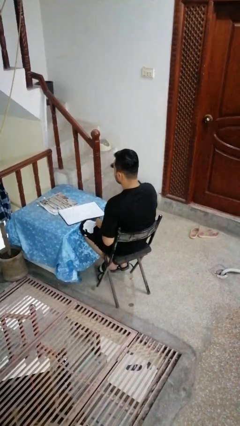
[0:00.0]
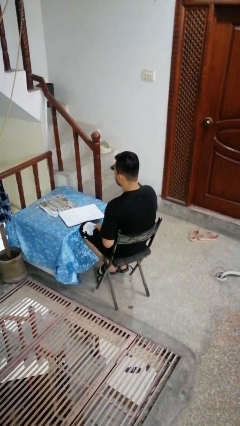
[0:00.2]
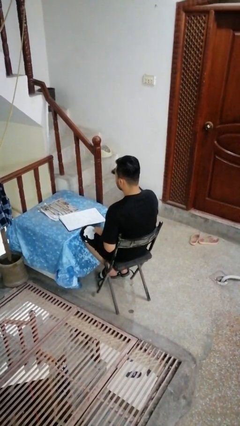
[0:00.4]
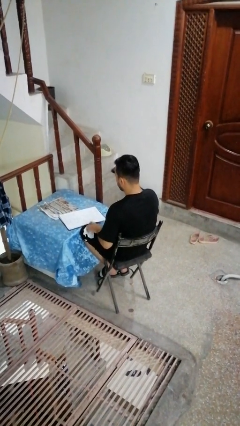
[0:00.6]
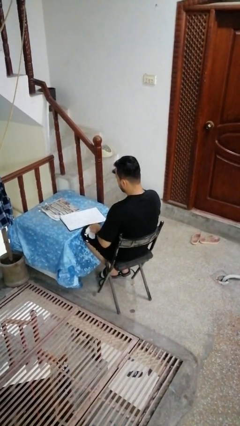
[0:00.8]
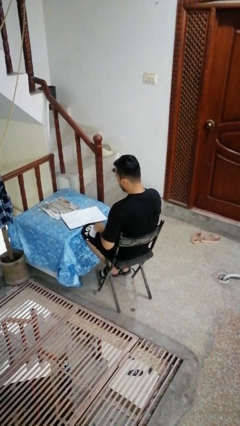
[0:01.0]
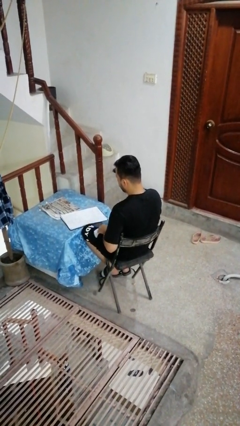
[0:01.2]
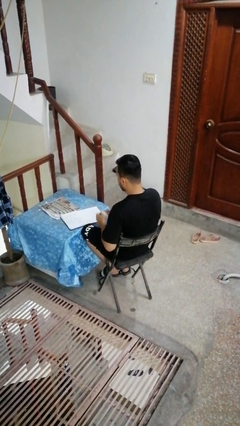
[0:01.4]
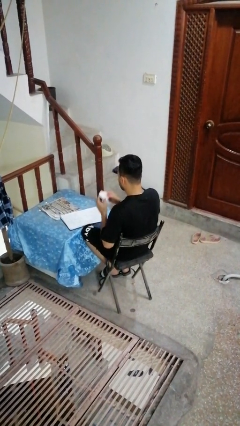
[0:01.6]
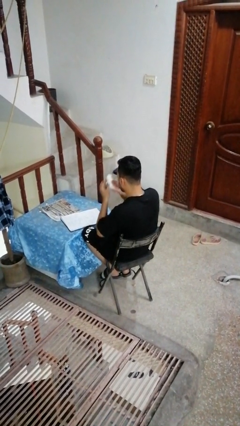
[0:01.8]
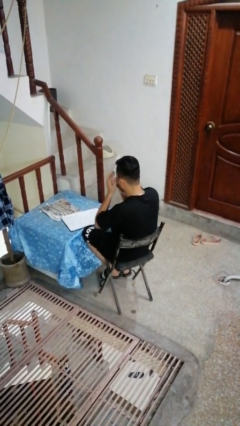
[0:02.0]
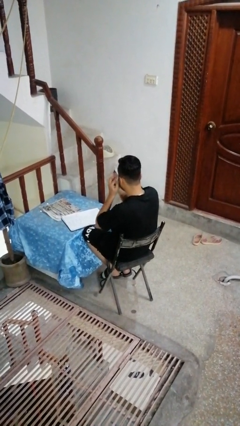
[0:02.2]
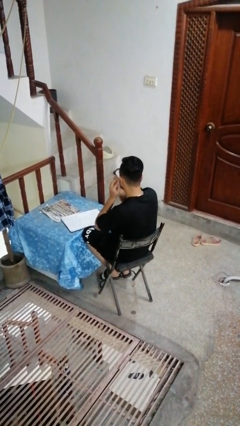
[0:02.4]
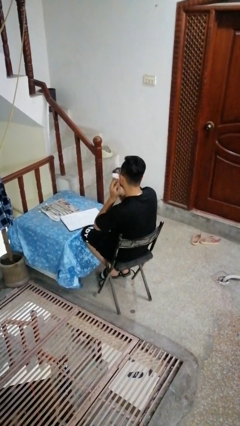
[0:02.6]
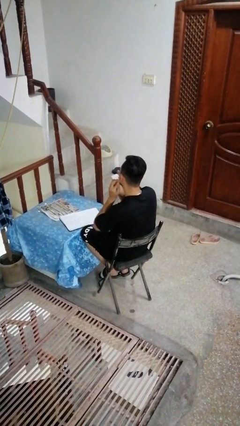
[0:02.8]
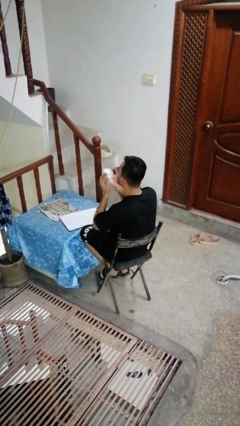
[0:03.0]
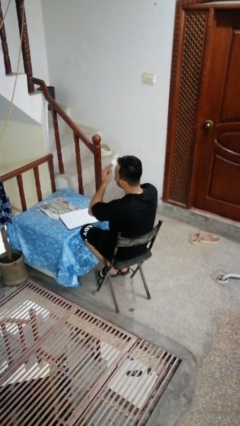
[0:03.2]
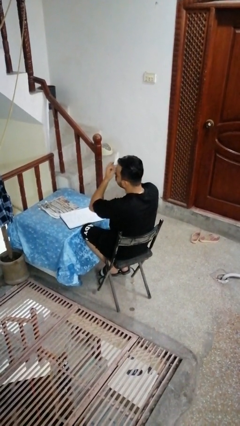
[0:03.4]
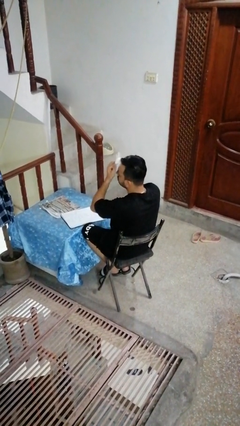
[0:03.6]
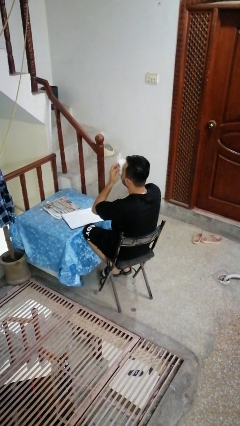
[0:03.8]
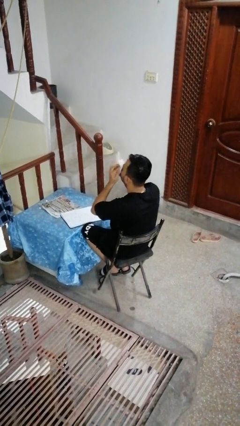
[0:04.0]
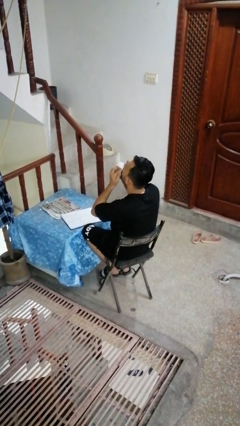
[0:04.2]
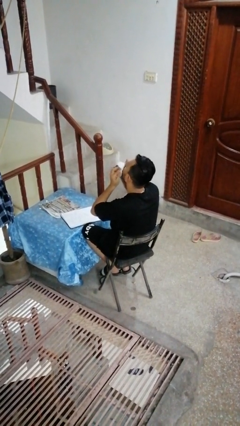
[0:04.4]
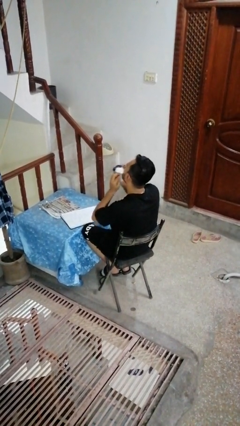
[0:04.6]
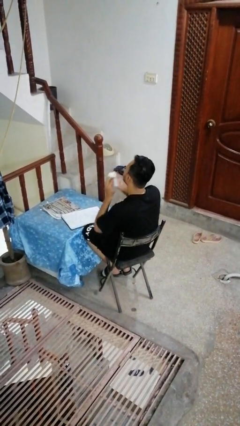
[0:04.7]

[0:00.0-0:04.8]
person wipes mouth with napkin

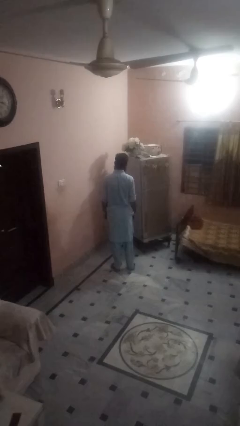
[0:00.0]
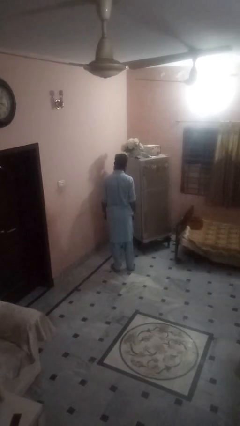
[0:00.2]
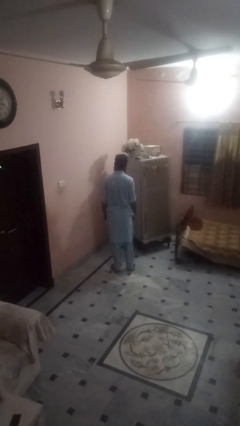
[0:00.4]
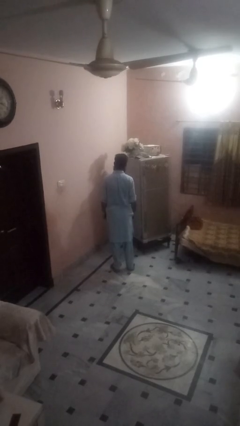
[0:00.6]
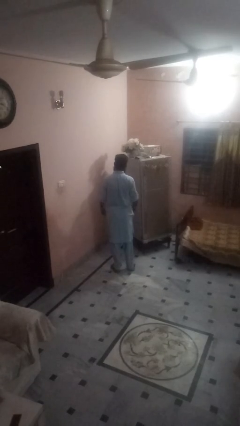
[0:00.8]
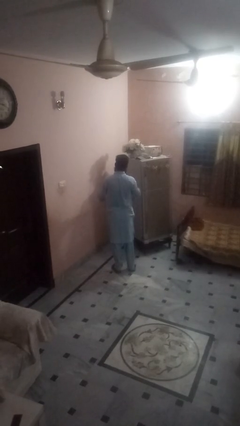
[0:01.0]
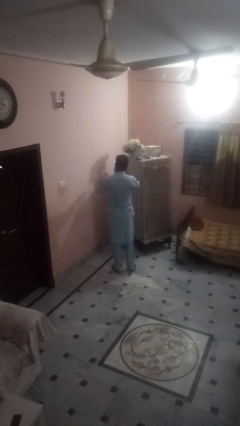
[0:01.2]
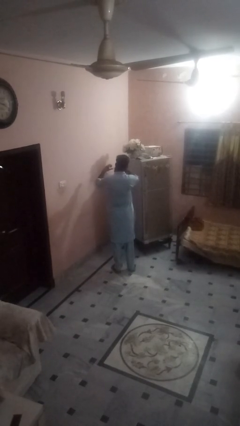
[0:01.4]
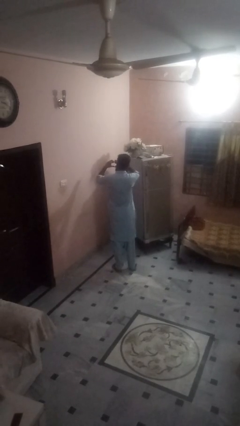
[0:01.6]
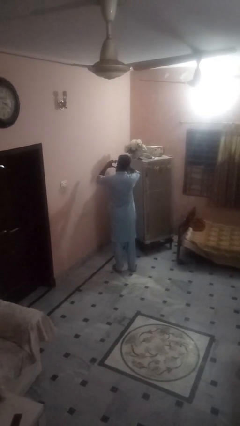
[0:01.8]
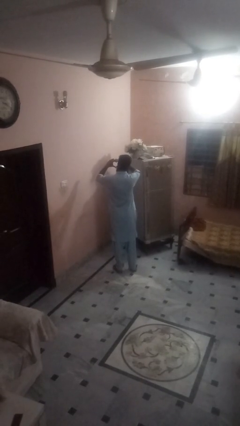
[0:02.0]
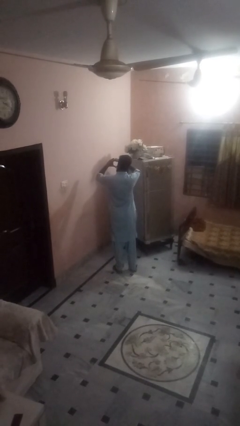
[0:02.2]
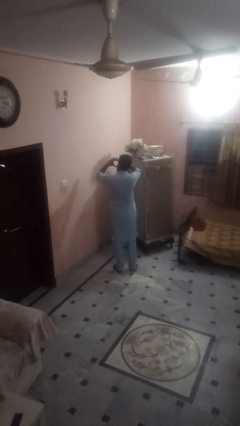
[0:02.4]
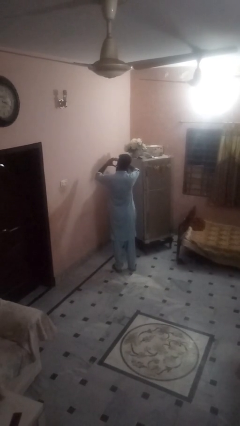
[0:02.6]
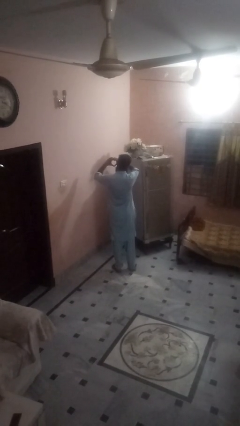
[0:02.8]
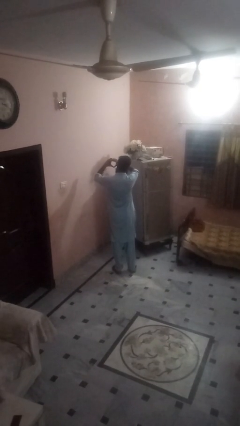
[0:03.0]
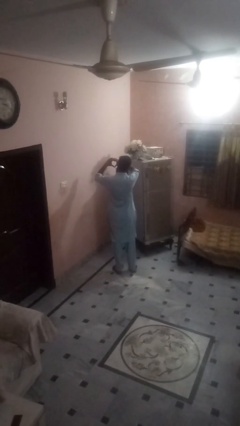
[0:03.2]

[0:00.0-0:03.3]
person gestures heart

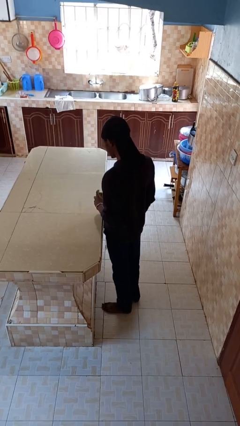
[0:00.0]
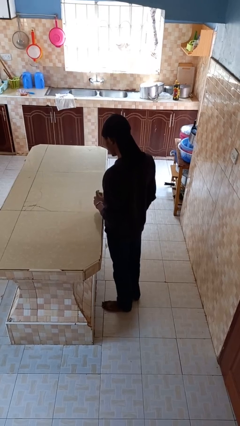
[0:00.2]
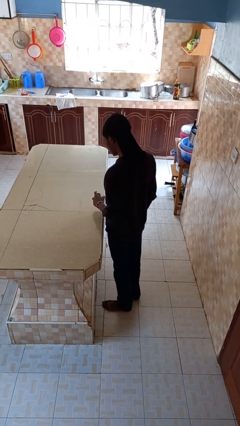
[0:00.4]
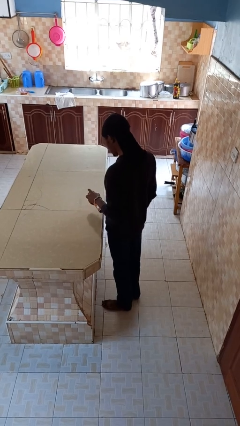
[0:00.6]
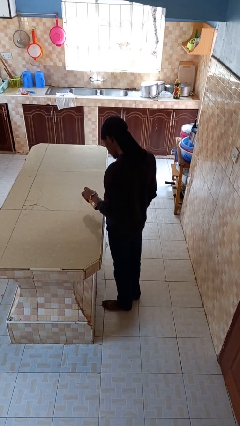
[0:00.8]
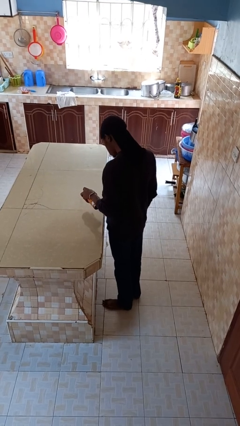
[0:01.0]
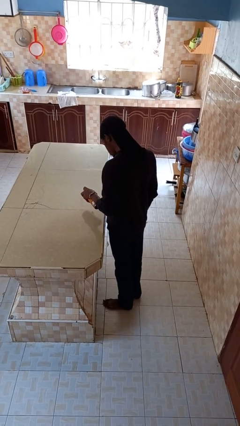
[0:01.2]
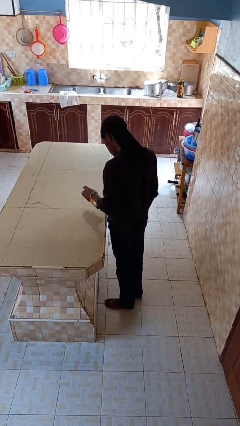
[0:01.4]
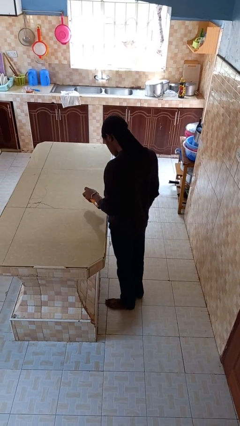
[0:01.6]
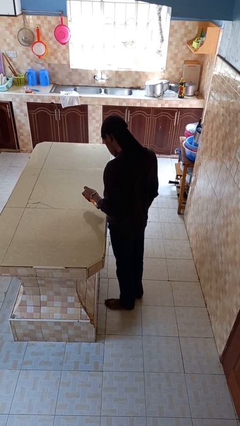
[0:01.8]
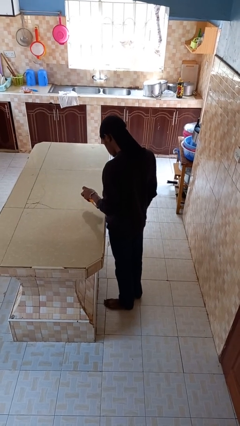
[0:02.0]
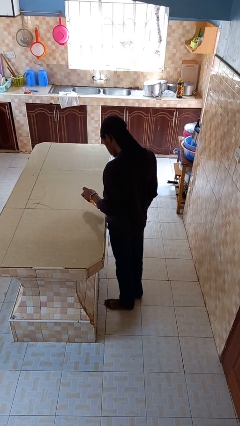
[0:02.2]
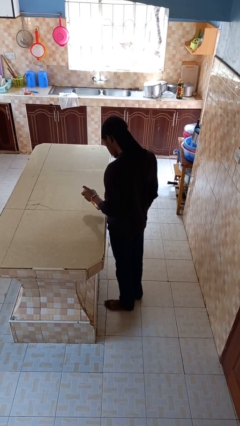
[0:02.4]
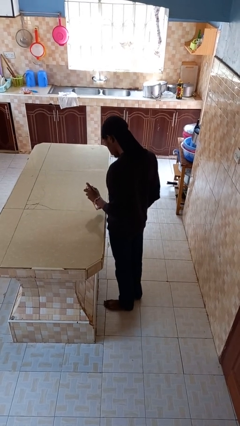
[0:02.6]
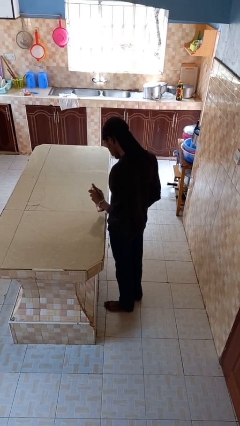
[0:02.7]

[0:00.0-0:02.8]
person sprays from bottle

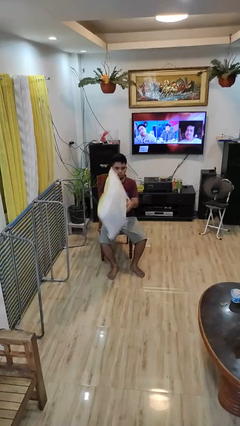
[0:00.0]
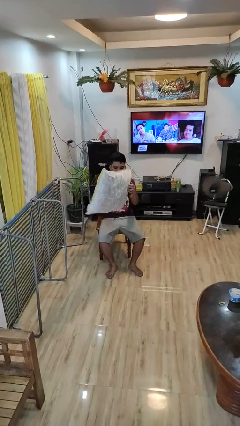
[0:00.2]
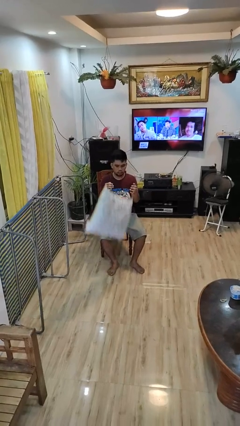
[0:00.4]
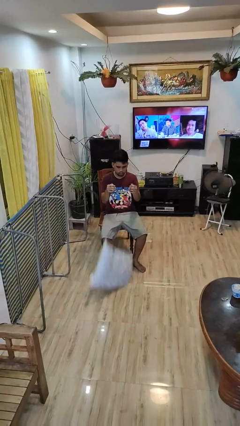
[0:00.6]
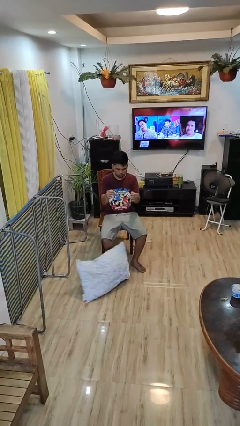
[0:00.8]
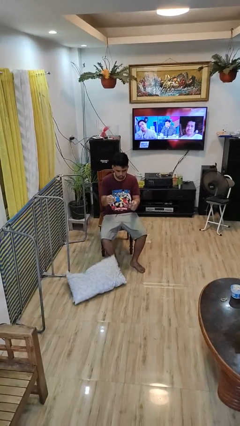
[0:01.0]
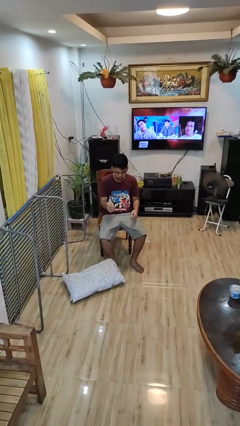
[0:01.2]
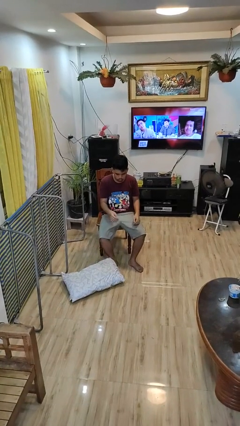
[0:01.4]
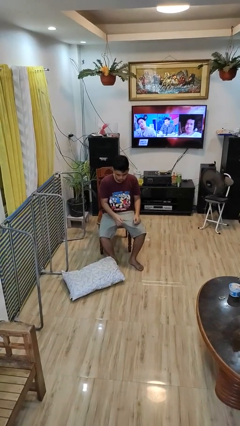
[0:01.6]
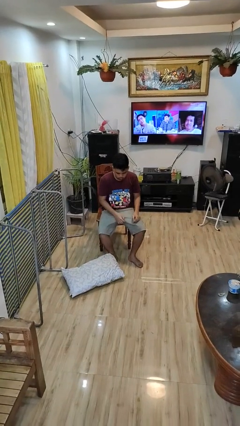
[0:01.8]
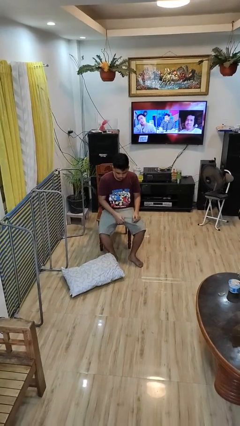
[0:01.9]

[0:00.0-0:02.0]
person drops object

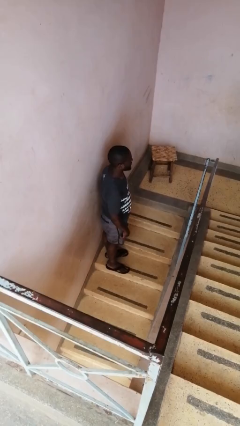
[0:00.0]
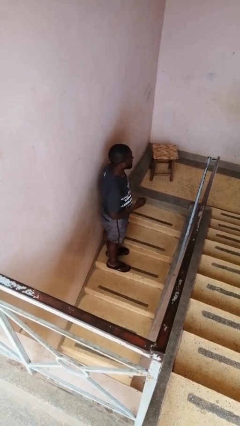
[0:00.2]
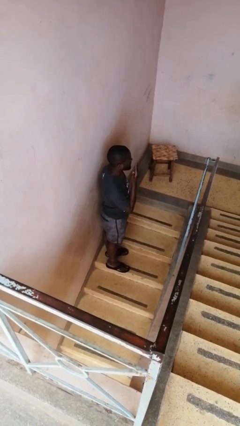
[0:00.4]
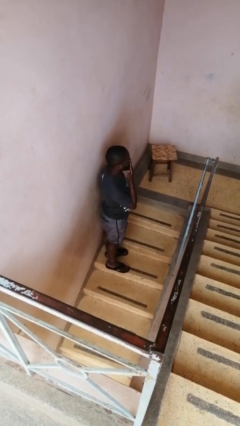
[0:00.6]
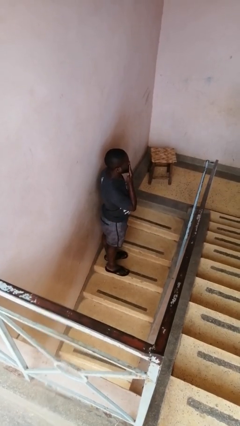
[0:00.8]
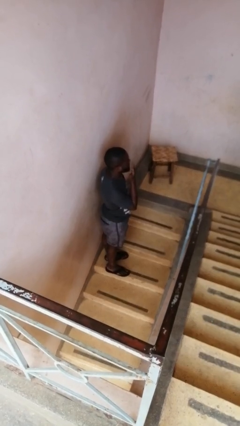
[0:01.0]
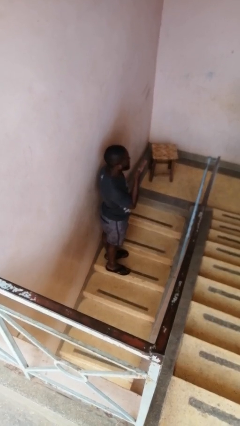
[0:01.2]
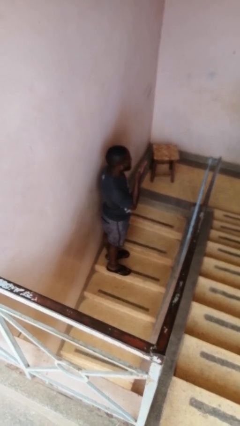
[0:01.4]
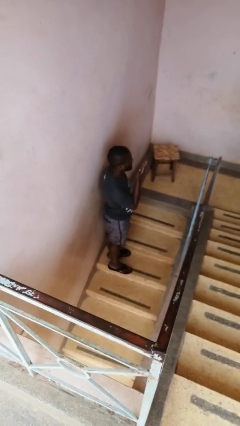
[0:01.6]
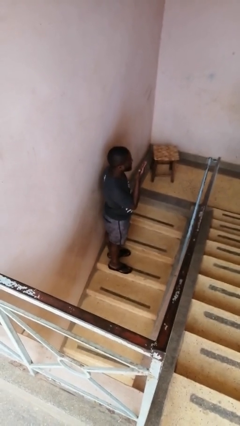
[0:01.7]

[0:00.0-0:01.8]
person gestures blow kiss

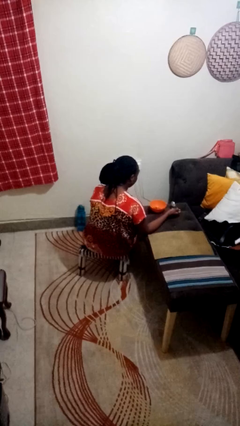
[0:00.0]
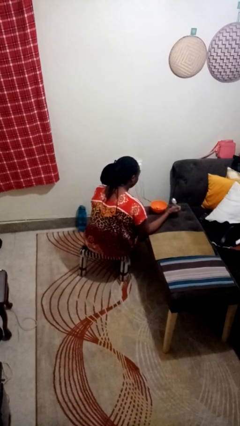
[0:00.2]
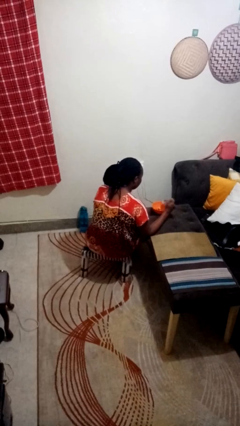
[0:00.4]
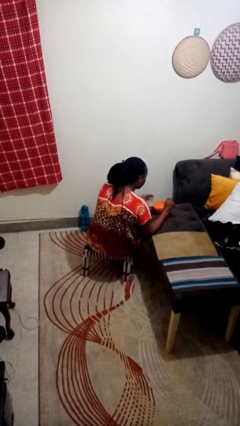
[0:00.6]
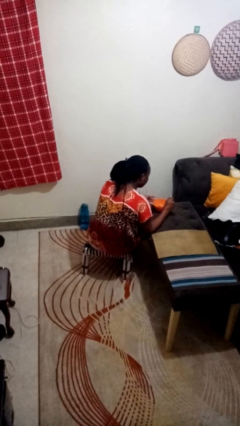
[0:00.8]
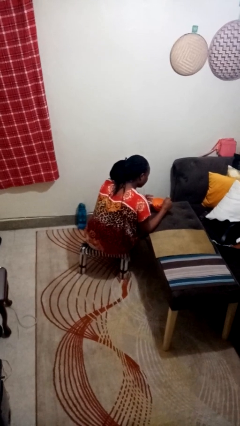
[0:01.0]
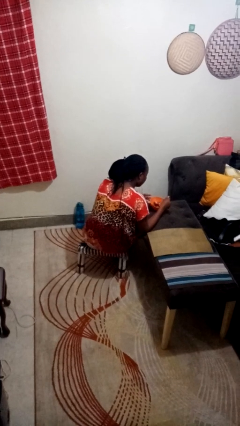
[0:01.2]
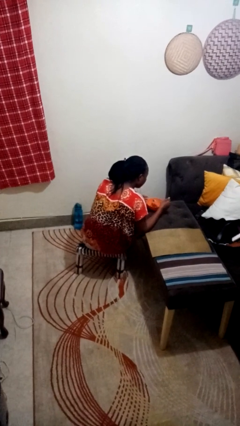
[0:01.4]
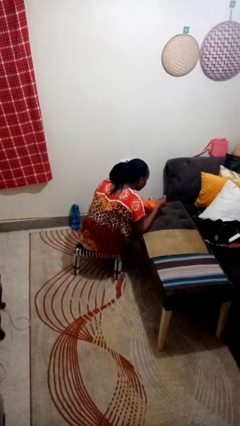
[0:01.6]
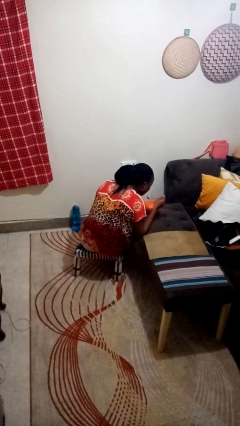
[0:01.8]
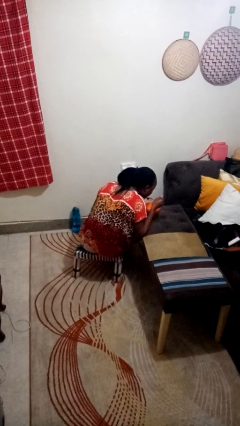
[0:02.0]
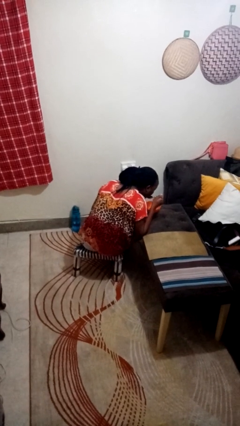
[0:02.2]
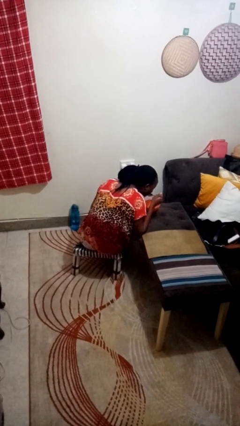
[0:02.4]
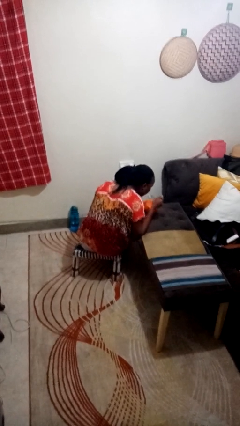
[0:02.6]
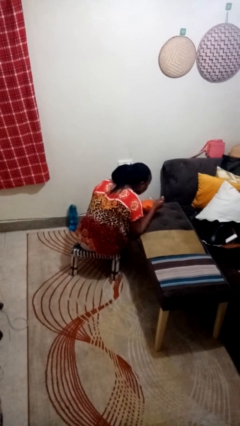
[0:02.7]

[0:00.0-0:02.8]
person eats with utensil

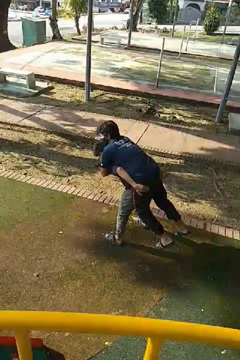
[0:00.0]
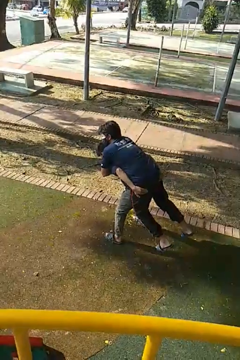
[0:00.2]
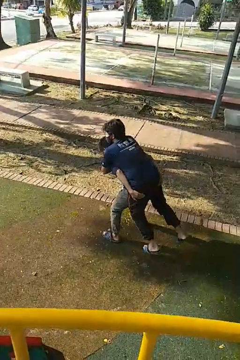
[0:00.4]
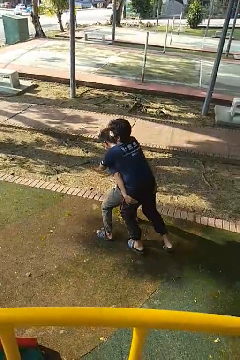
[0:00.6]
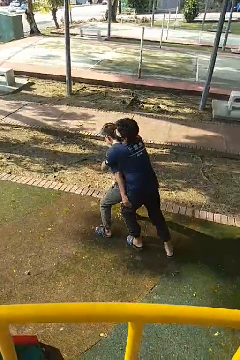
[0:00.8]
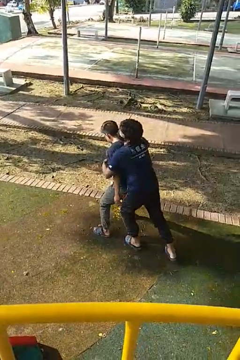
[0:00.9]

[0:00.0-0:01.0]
person puts down person
